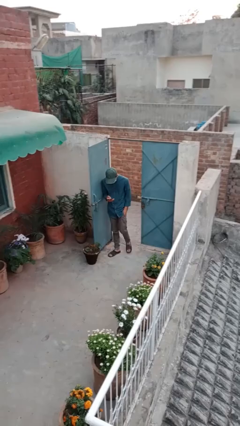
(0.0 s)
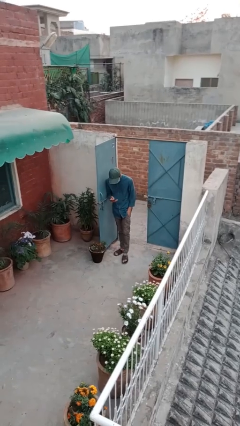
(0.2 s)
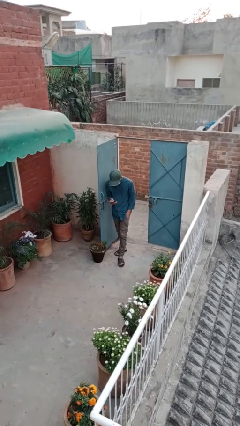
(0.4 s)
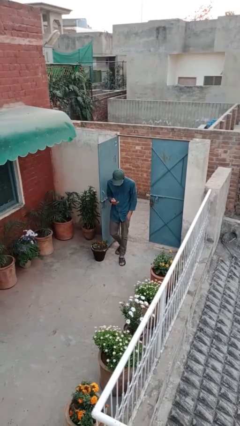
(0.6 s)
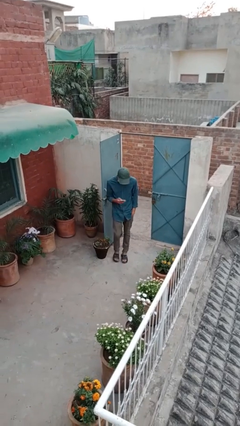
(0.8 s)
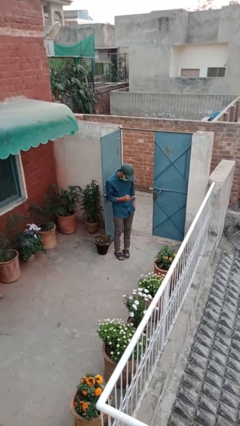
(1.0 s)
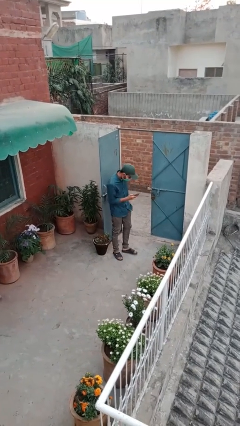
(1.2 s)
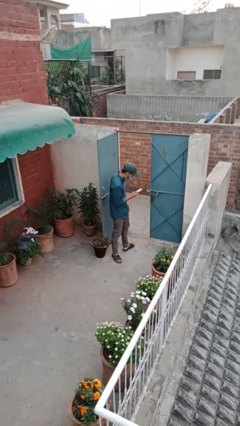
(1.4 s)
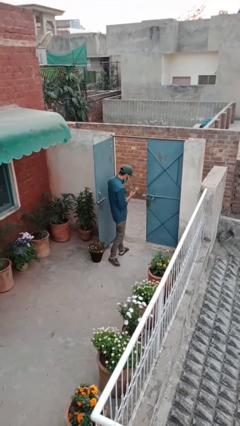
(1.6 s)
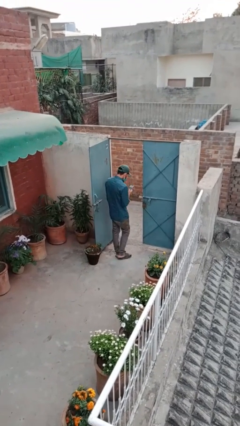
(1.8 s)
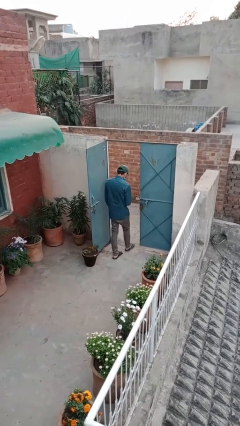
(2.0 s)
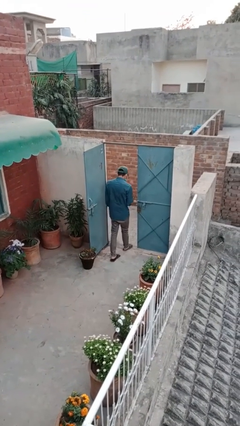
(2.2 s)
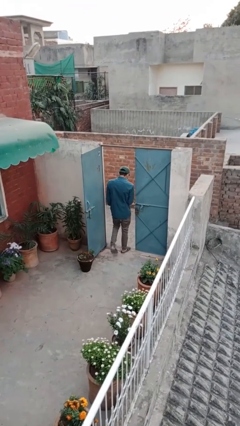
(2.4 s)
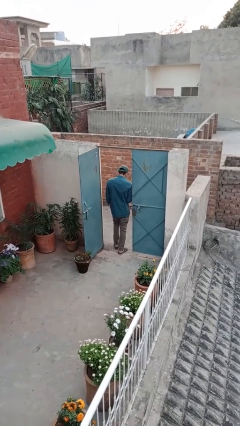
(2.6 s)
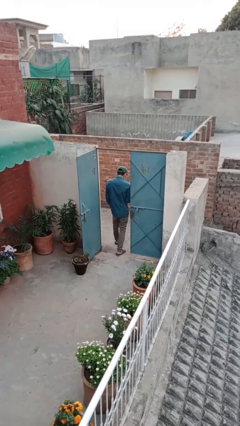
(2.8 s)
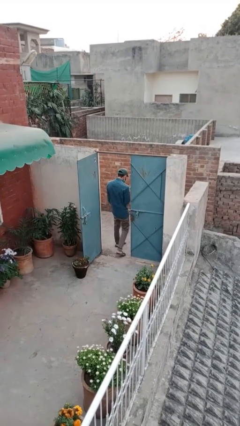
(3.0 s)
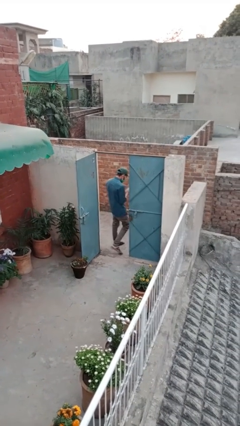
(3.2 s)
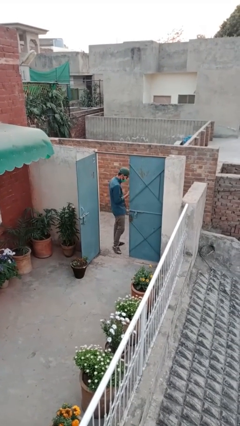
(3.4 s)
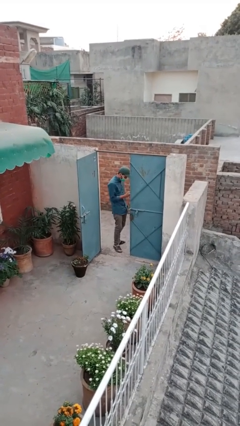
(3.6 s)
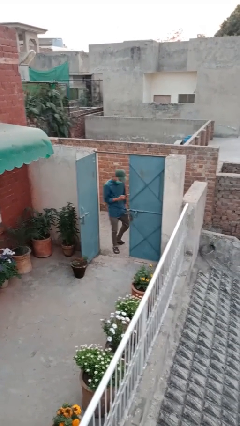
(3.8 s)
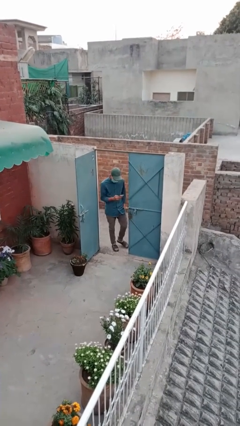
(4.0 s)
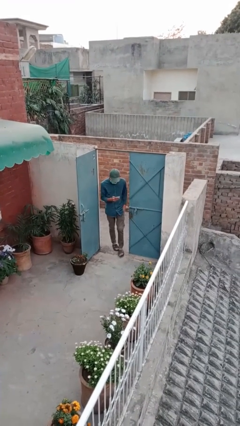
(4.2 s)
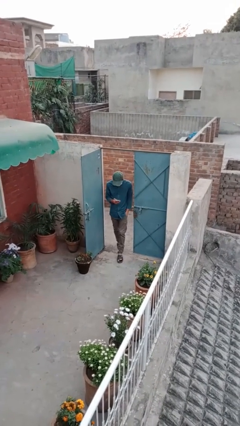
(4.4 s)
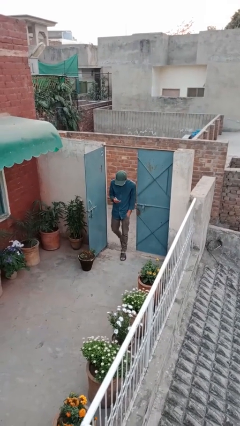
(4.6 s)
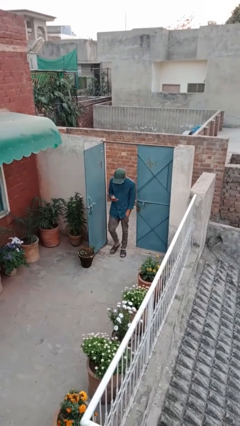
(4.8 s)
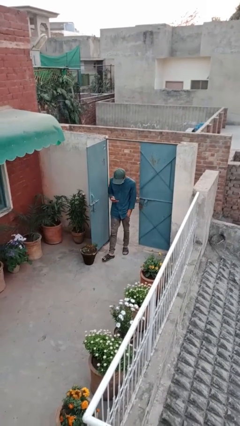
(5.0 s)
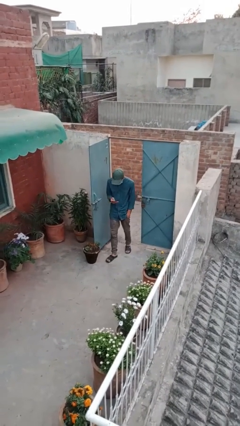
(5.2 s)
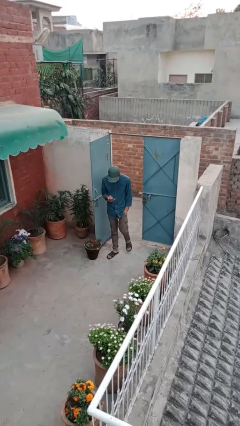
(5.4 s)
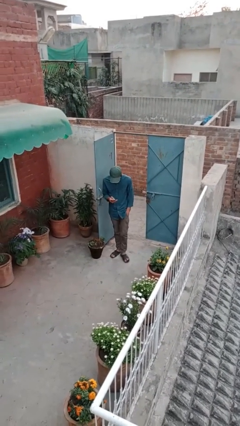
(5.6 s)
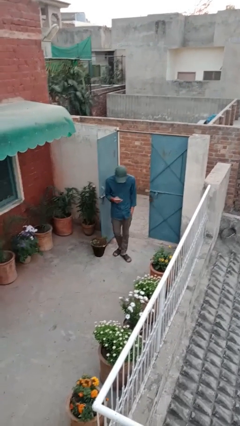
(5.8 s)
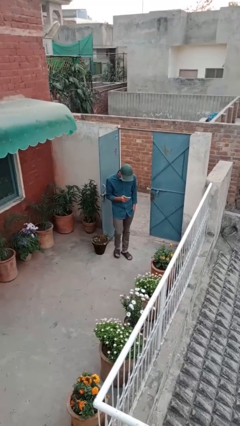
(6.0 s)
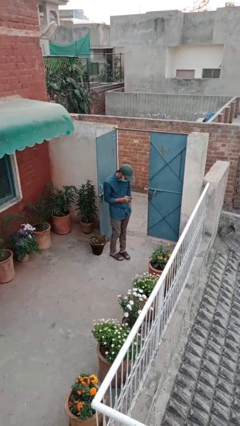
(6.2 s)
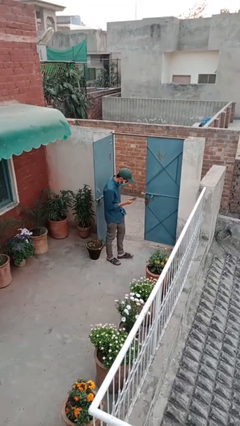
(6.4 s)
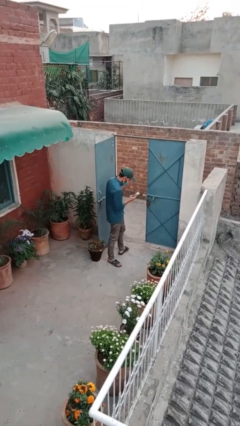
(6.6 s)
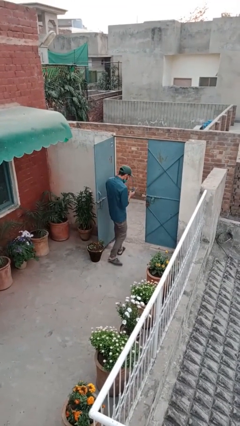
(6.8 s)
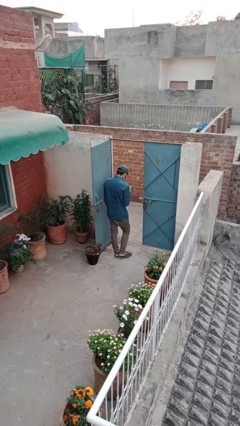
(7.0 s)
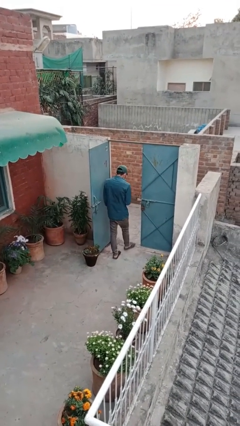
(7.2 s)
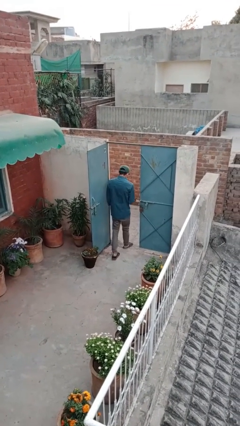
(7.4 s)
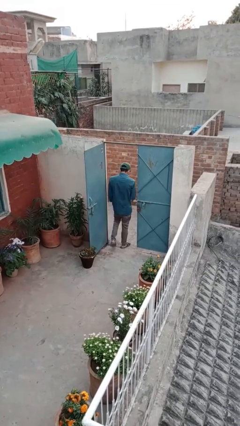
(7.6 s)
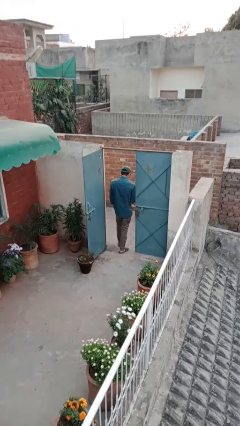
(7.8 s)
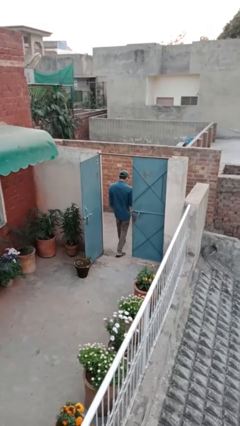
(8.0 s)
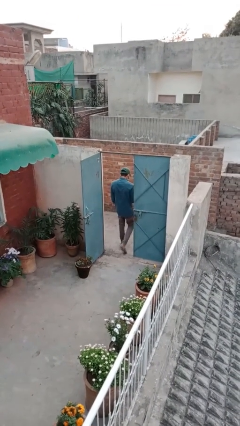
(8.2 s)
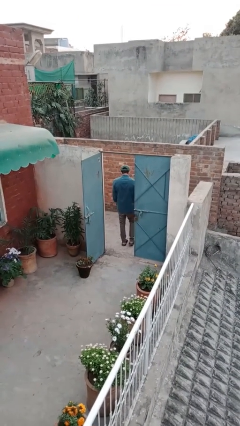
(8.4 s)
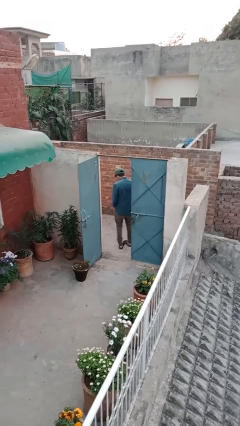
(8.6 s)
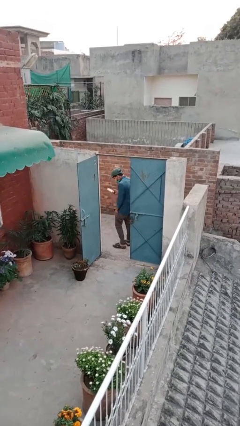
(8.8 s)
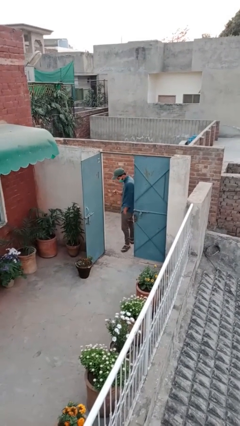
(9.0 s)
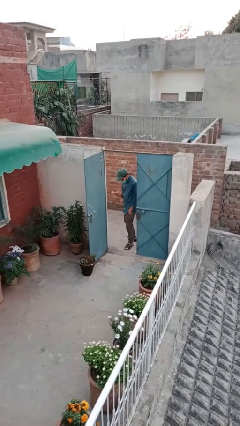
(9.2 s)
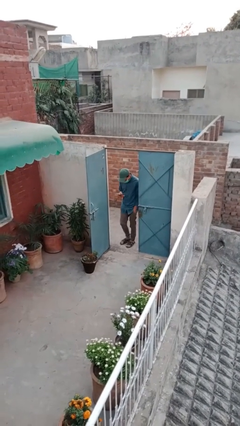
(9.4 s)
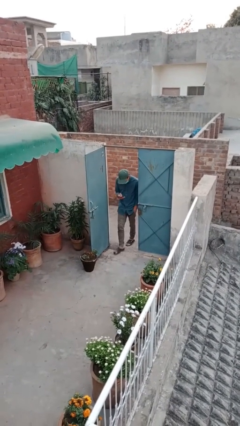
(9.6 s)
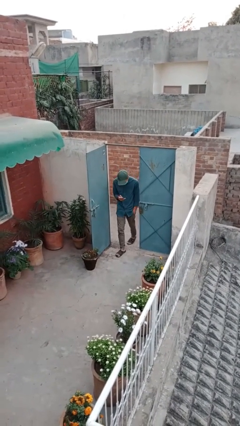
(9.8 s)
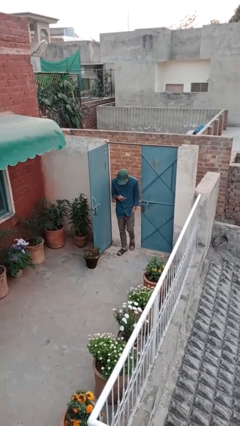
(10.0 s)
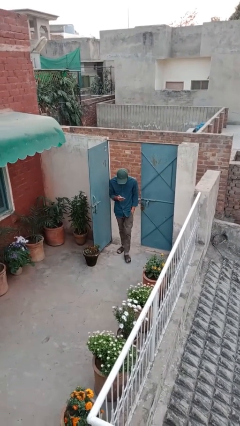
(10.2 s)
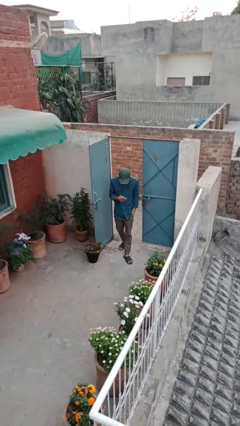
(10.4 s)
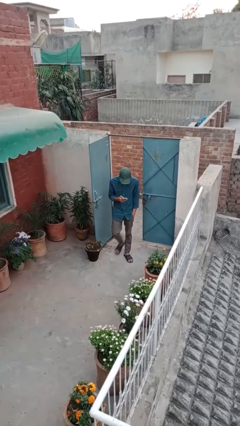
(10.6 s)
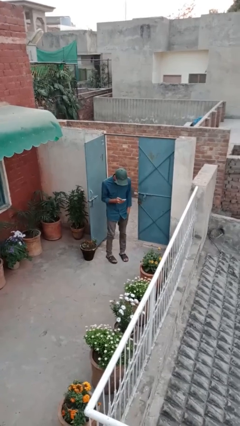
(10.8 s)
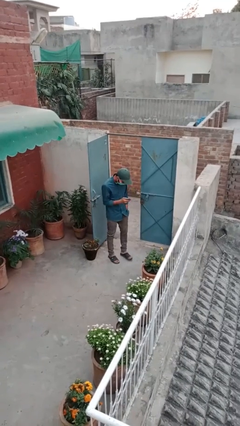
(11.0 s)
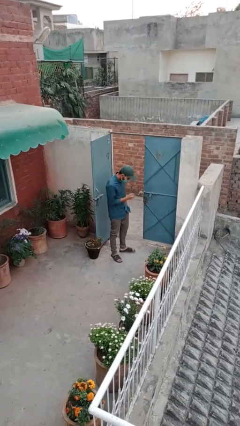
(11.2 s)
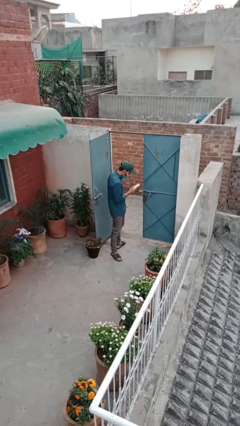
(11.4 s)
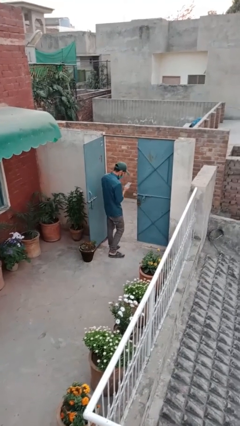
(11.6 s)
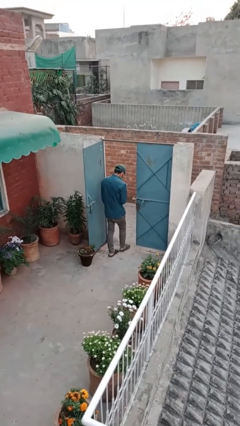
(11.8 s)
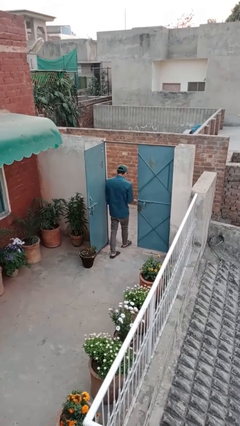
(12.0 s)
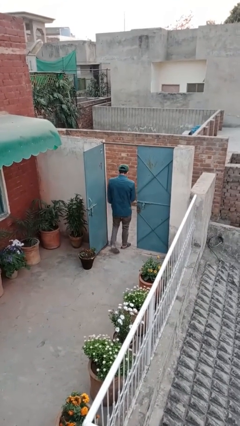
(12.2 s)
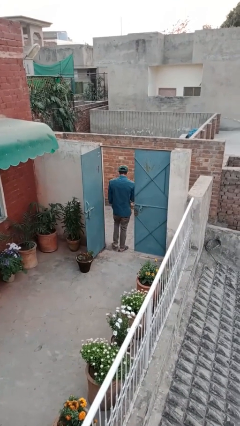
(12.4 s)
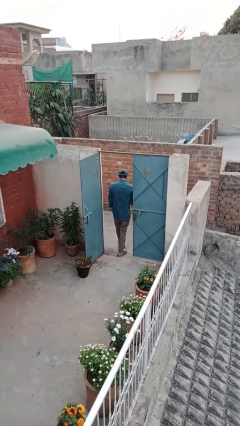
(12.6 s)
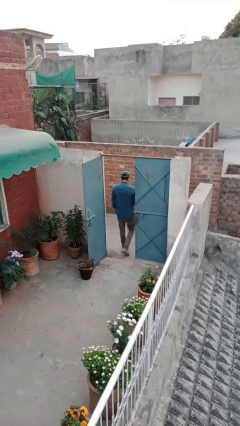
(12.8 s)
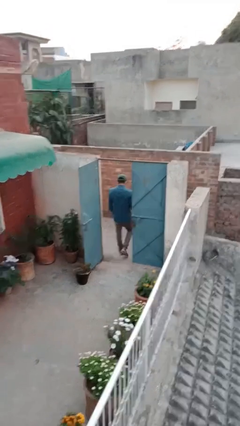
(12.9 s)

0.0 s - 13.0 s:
person texts on phone

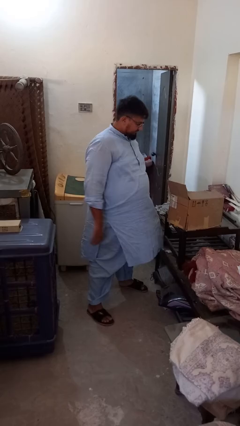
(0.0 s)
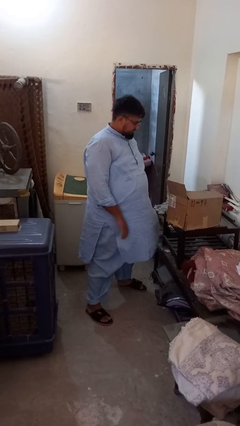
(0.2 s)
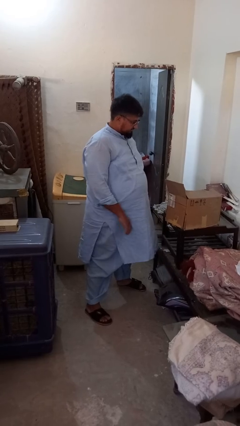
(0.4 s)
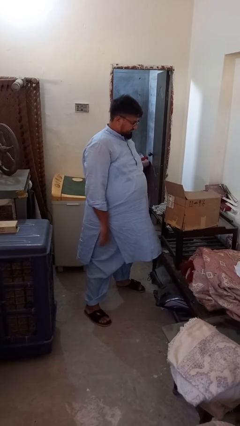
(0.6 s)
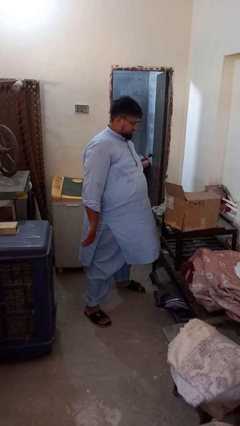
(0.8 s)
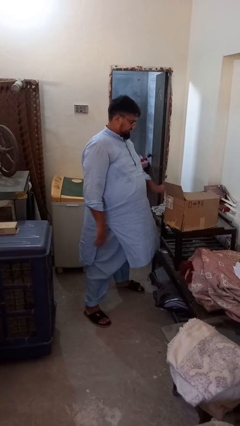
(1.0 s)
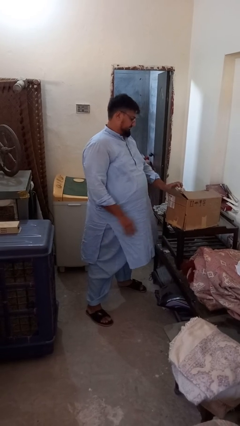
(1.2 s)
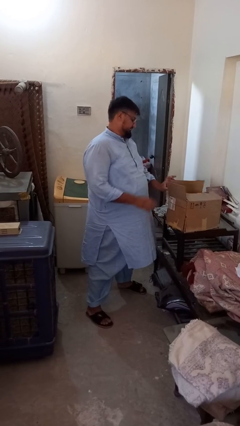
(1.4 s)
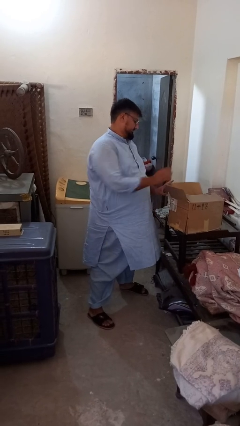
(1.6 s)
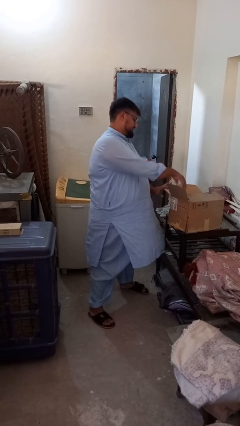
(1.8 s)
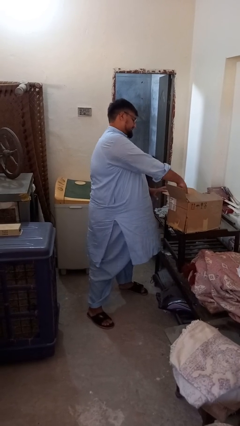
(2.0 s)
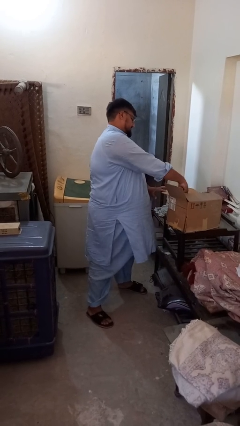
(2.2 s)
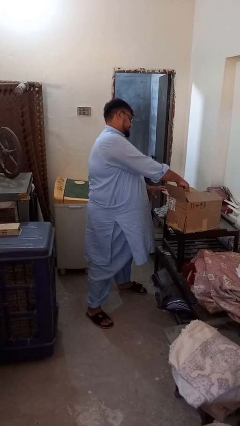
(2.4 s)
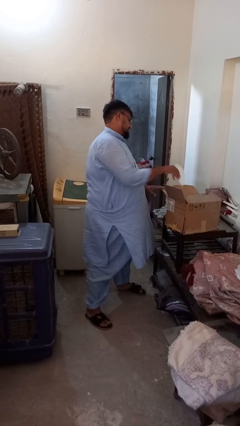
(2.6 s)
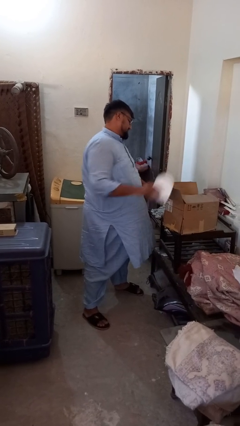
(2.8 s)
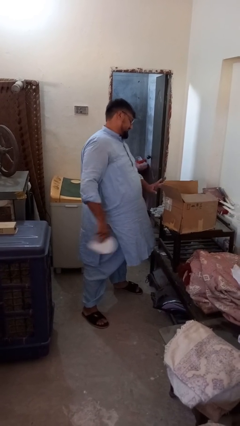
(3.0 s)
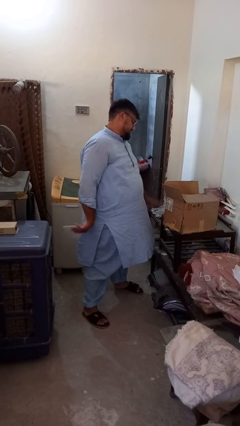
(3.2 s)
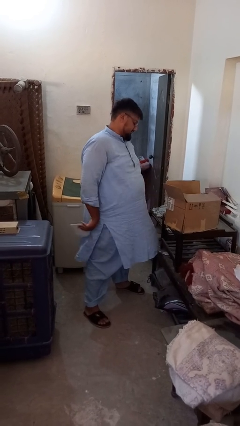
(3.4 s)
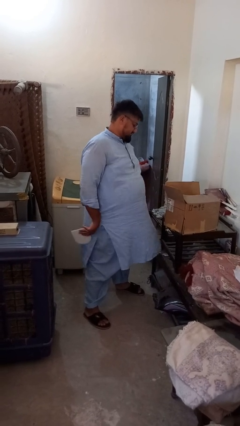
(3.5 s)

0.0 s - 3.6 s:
person takes object from box

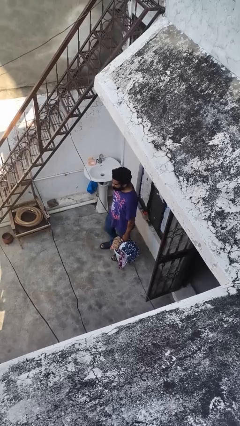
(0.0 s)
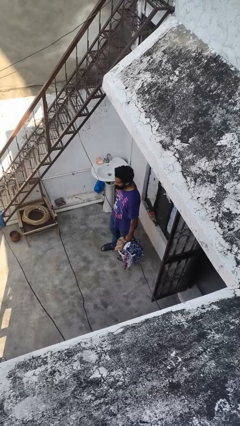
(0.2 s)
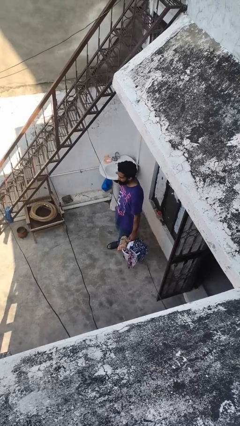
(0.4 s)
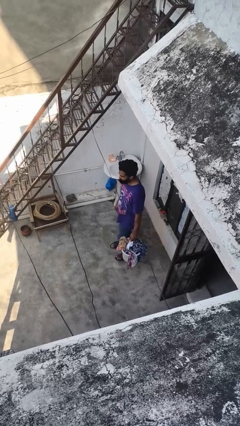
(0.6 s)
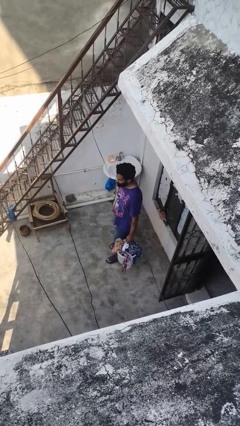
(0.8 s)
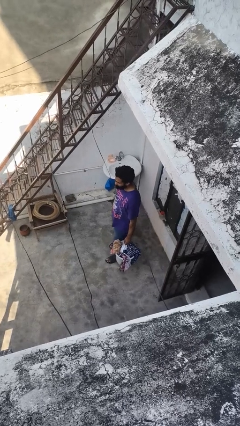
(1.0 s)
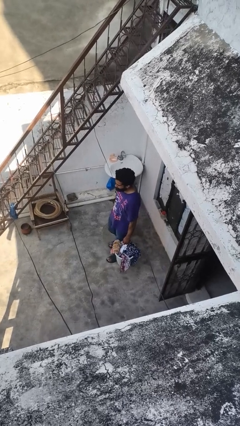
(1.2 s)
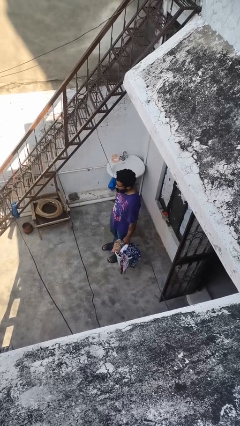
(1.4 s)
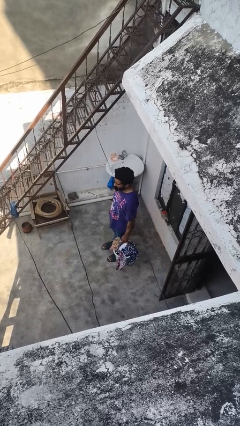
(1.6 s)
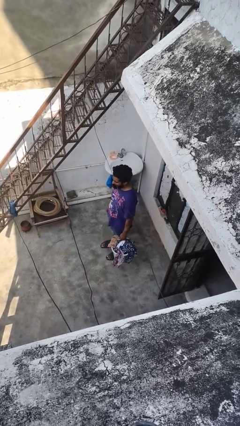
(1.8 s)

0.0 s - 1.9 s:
person carries laundry basket
